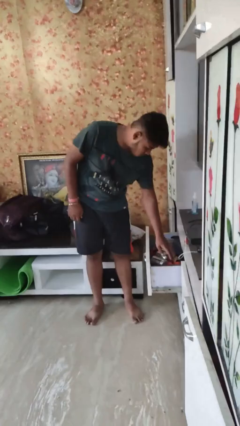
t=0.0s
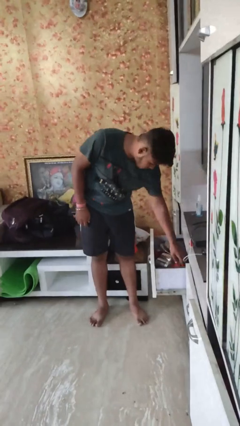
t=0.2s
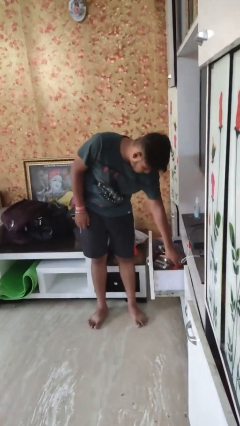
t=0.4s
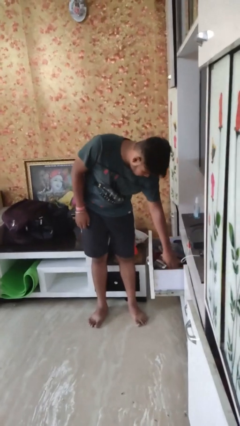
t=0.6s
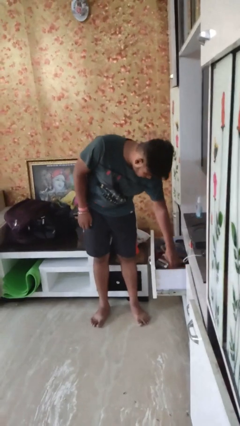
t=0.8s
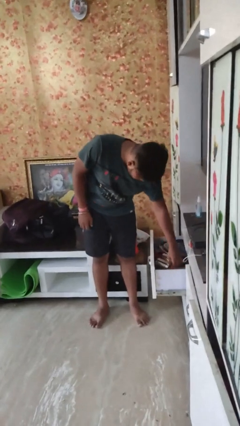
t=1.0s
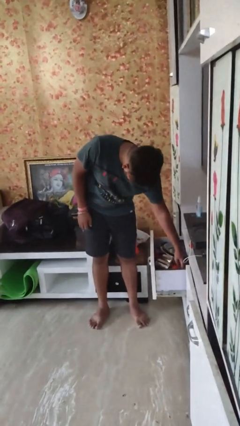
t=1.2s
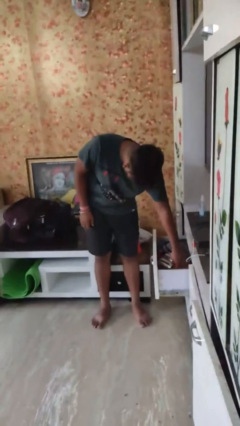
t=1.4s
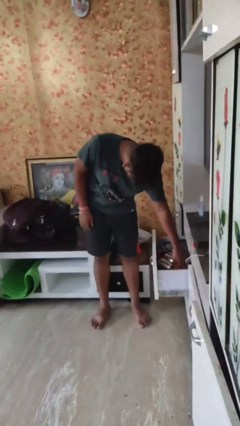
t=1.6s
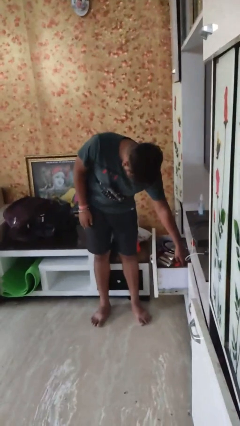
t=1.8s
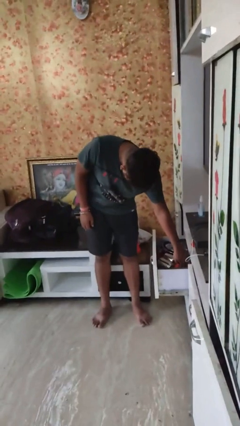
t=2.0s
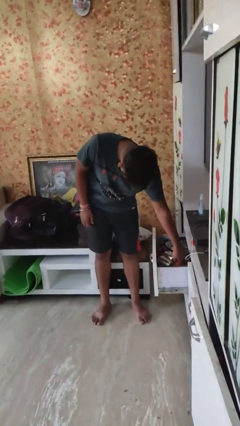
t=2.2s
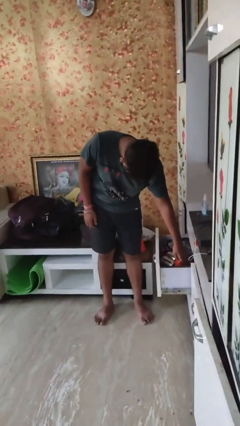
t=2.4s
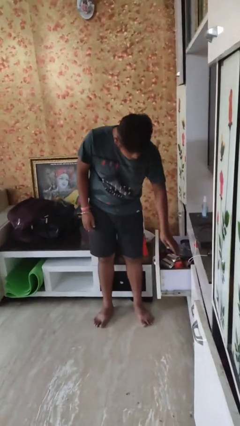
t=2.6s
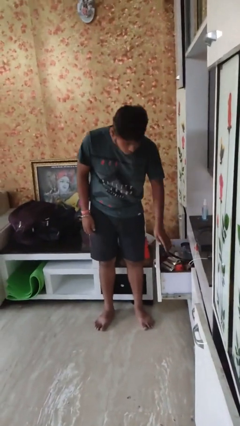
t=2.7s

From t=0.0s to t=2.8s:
person searches in kitchen drawer

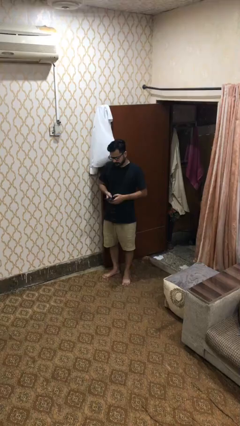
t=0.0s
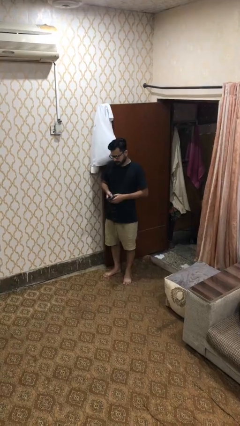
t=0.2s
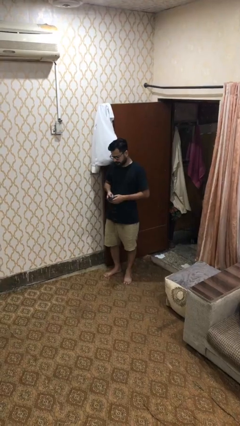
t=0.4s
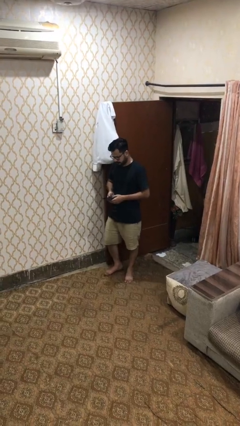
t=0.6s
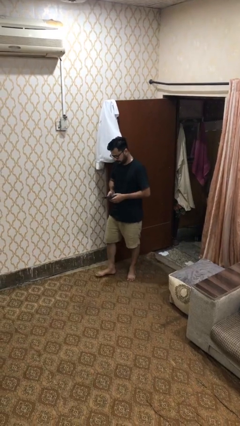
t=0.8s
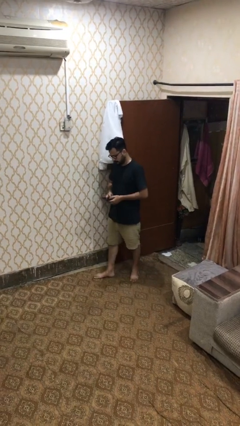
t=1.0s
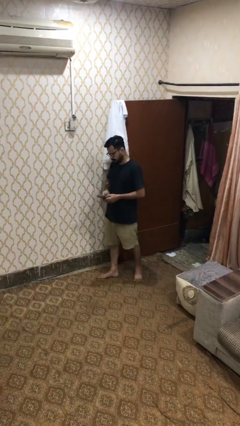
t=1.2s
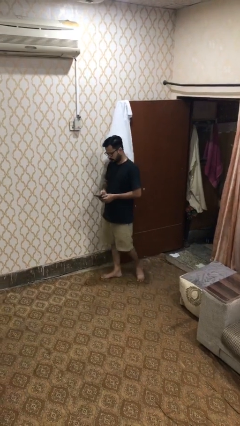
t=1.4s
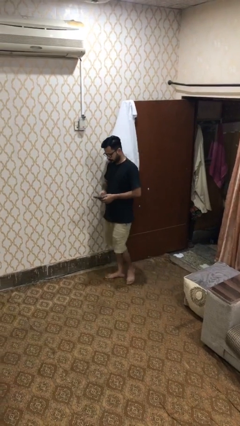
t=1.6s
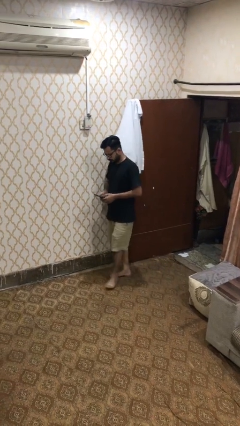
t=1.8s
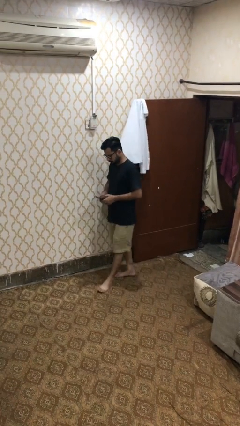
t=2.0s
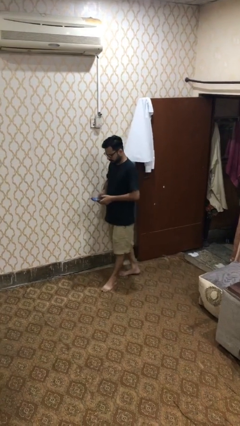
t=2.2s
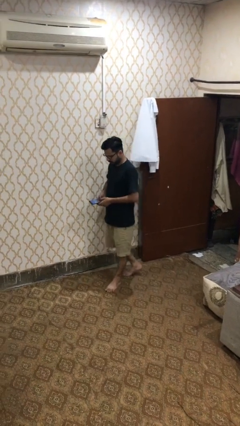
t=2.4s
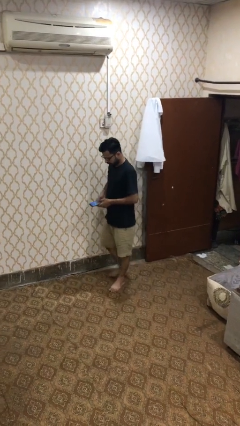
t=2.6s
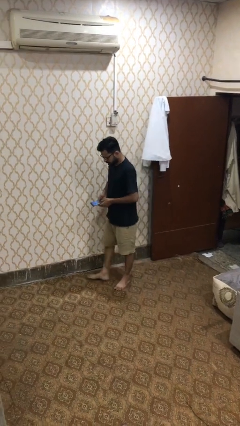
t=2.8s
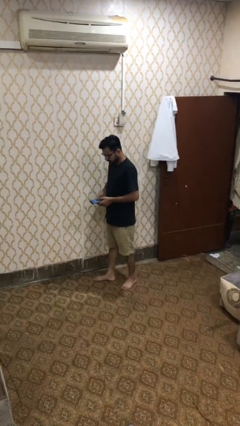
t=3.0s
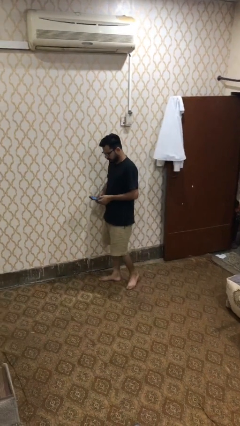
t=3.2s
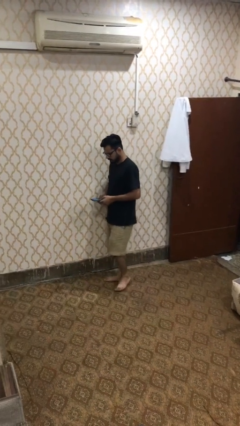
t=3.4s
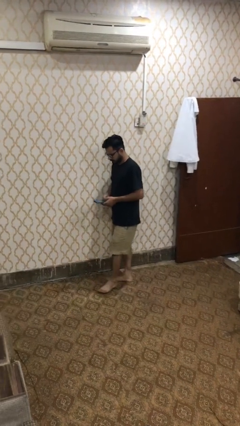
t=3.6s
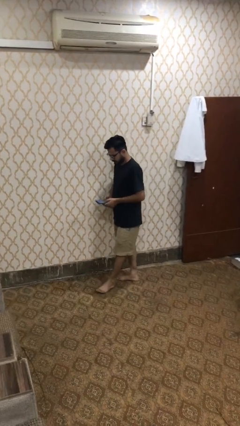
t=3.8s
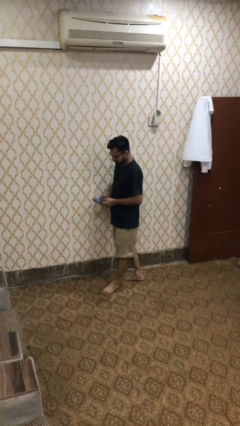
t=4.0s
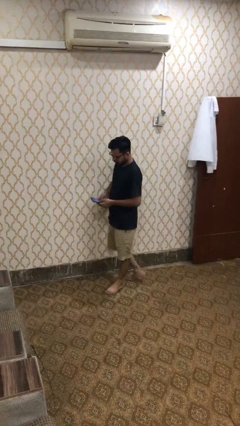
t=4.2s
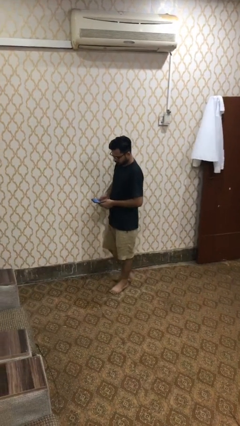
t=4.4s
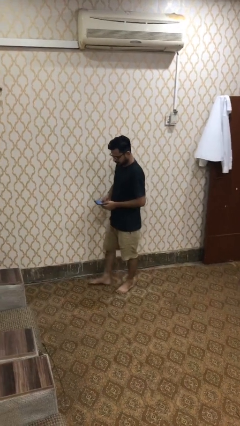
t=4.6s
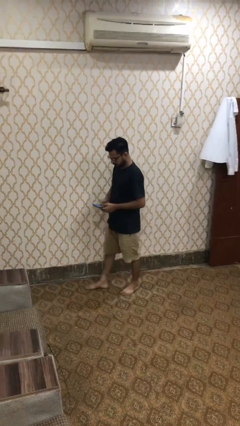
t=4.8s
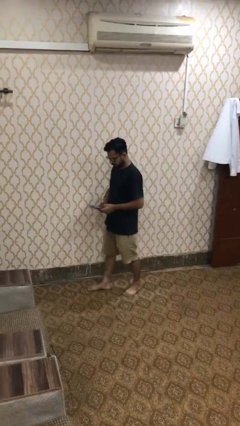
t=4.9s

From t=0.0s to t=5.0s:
person texts on phone

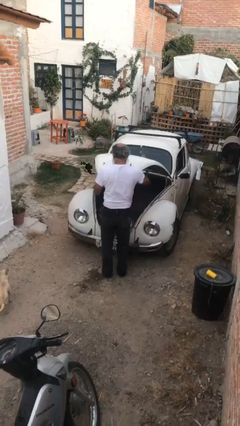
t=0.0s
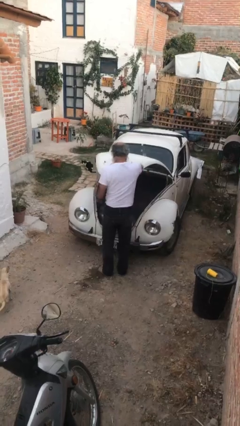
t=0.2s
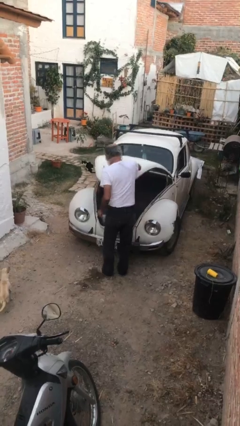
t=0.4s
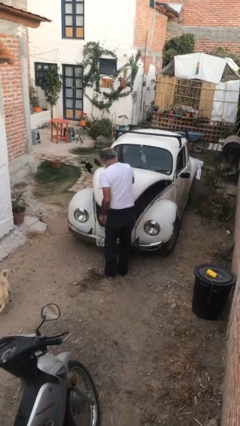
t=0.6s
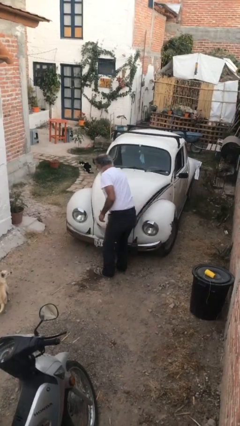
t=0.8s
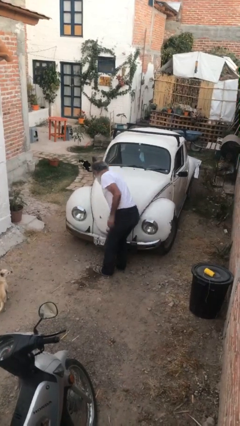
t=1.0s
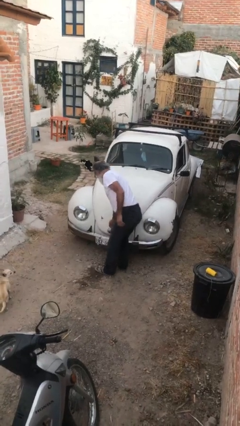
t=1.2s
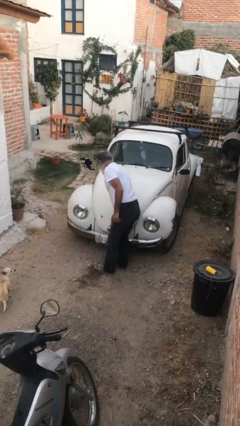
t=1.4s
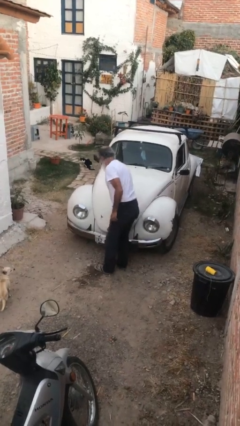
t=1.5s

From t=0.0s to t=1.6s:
person closes car trunk

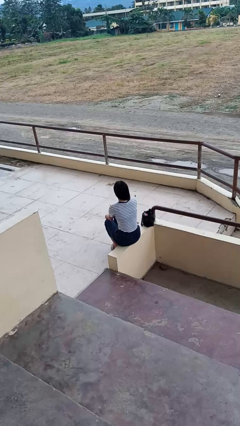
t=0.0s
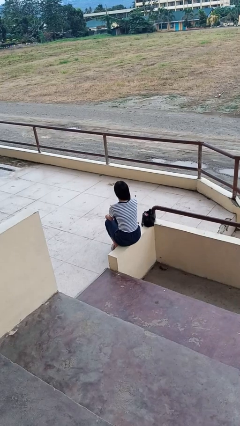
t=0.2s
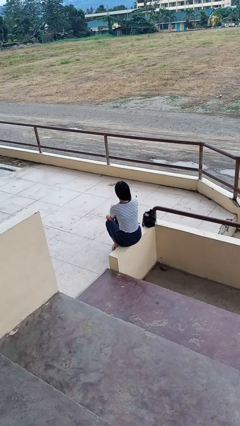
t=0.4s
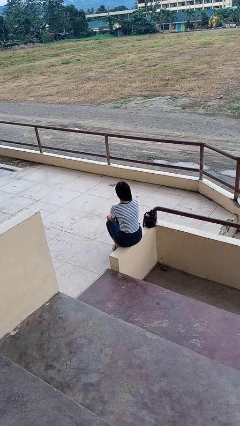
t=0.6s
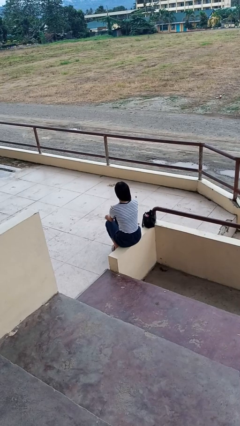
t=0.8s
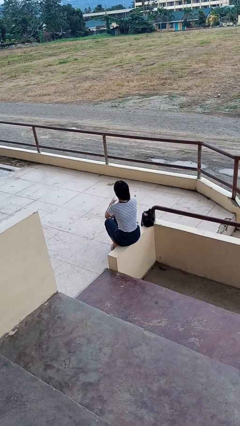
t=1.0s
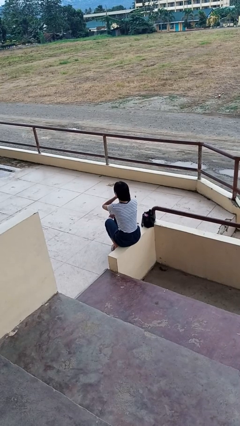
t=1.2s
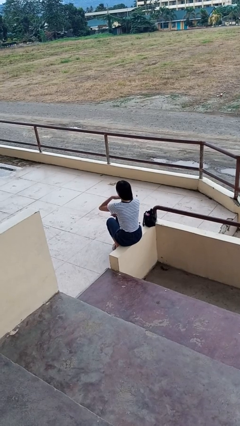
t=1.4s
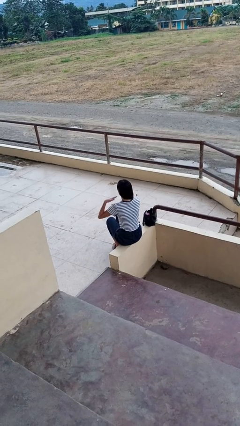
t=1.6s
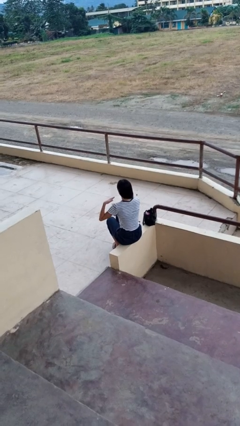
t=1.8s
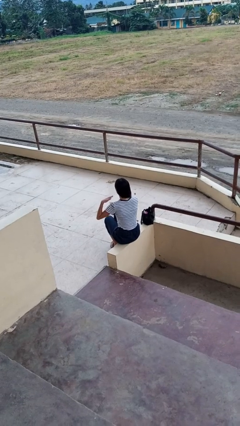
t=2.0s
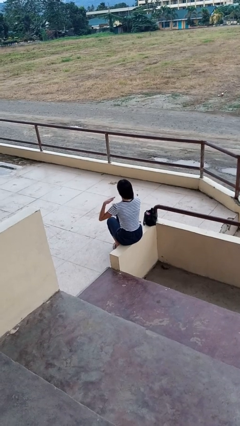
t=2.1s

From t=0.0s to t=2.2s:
person gestures cut

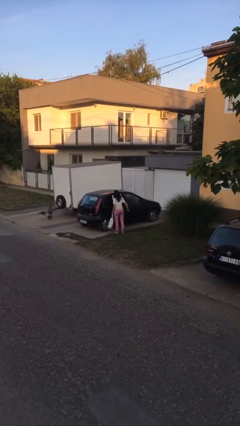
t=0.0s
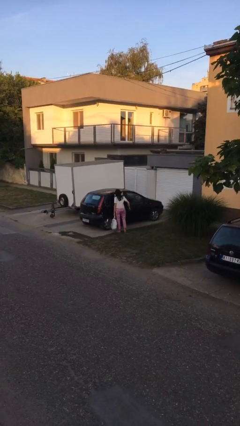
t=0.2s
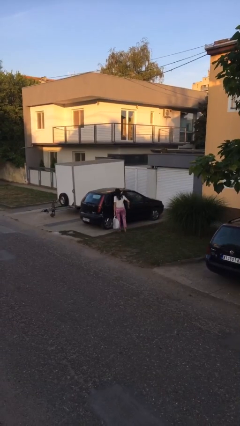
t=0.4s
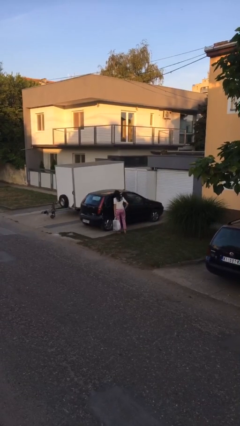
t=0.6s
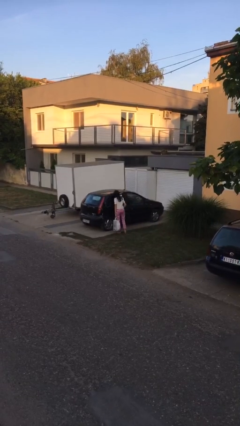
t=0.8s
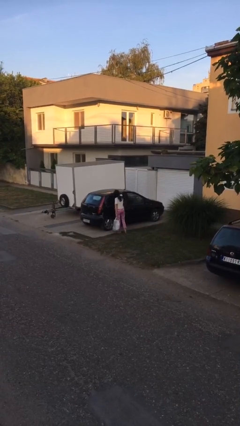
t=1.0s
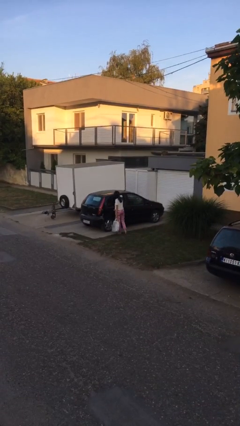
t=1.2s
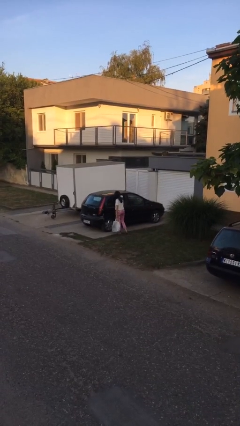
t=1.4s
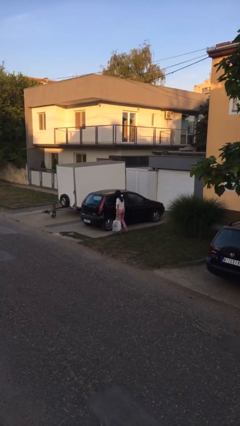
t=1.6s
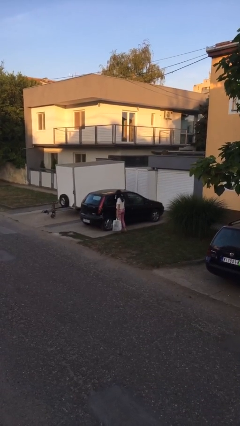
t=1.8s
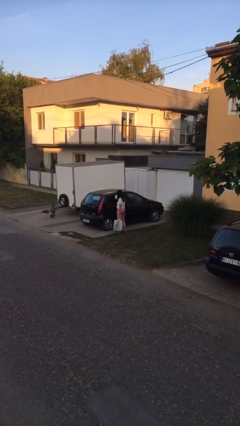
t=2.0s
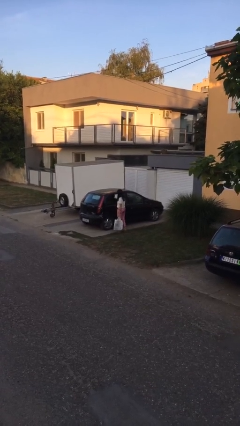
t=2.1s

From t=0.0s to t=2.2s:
person closes car door

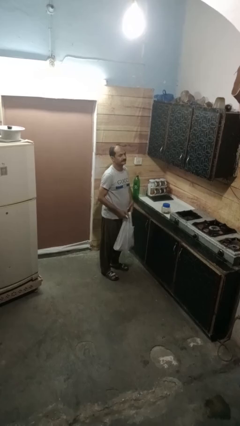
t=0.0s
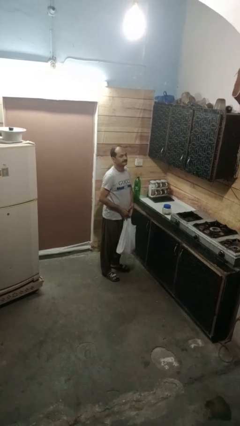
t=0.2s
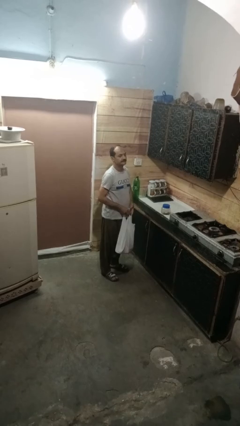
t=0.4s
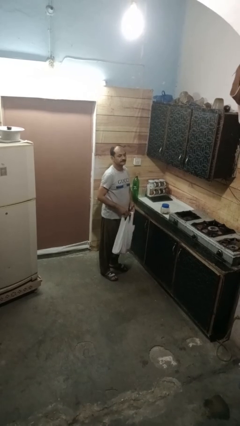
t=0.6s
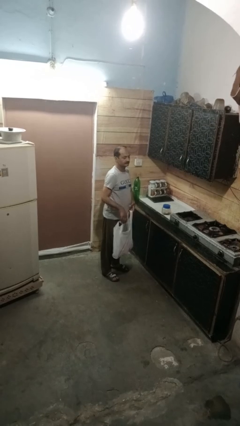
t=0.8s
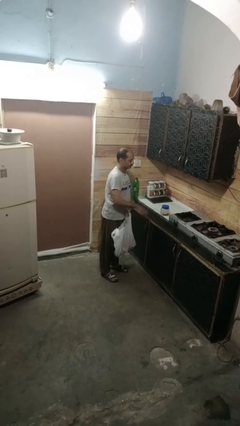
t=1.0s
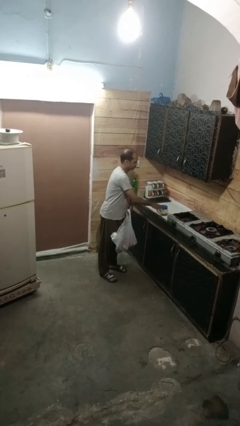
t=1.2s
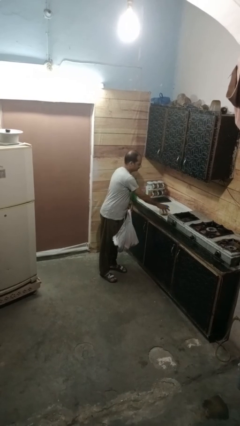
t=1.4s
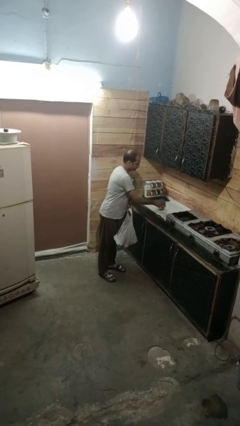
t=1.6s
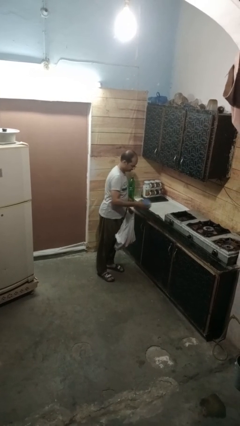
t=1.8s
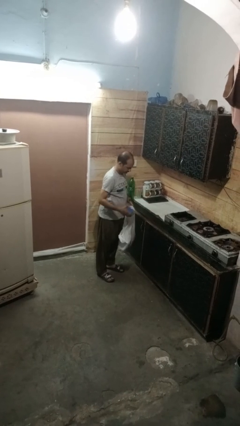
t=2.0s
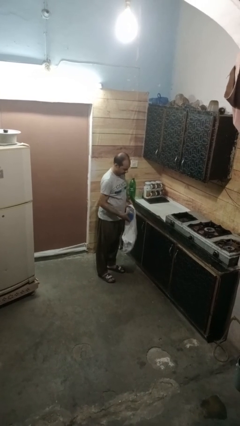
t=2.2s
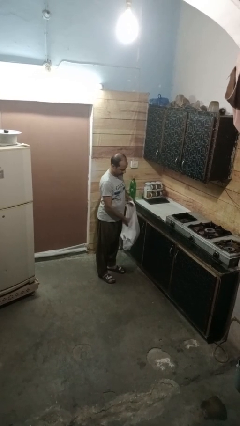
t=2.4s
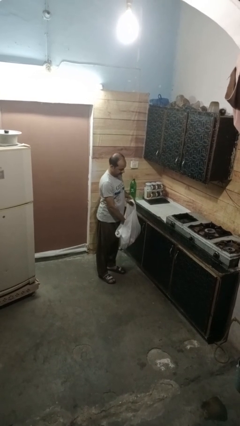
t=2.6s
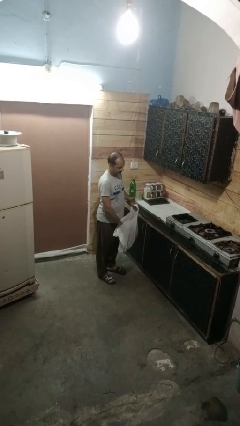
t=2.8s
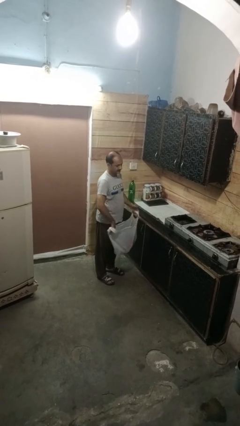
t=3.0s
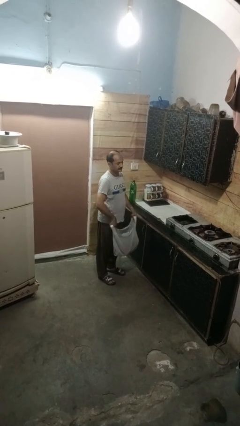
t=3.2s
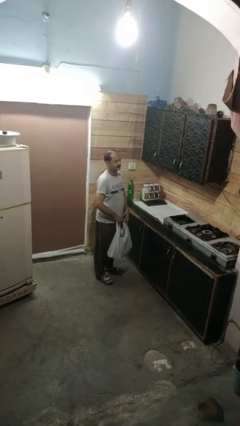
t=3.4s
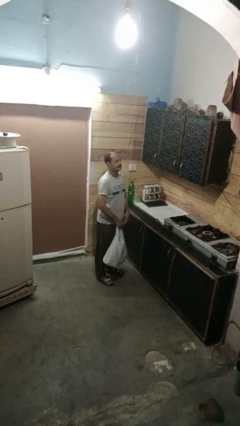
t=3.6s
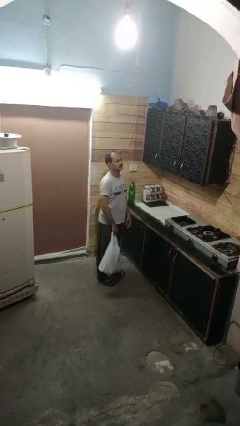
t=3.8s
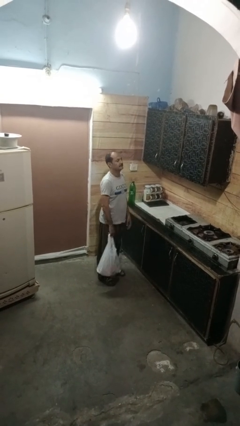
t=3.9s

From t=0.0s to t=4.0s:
person puts object into bag
